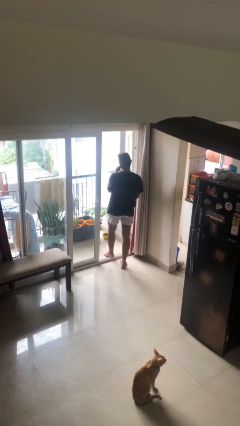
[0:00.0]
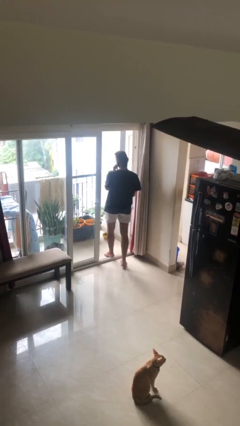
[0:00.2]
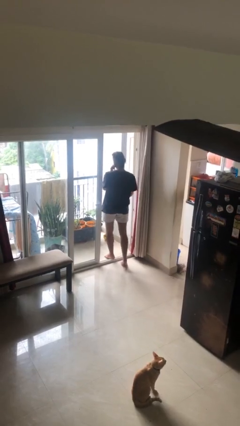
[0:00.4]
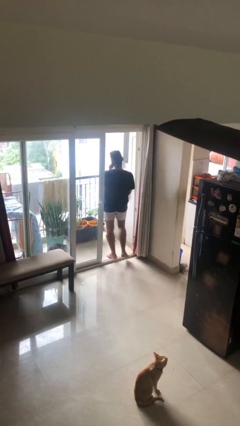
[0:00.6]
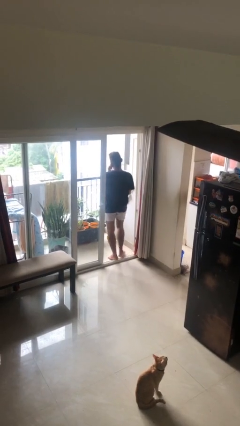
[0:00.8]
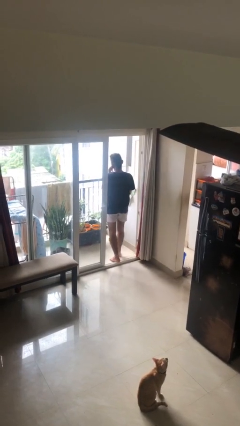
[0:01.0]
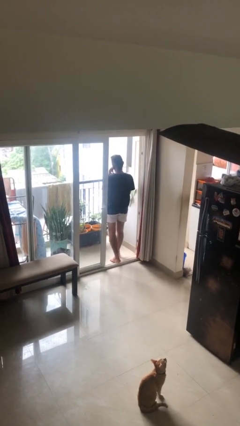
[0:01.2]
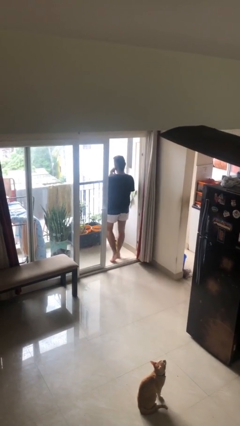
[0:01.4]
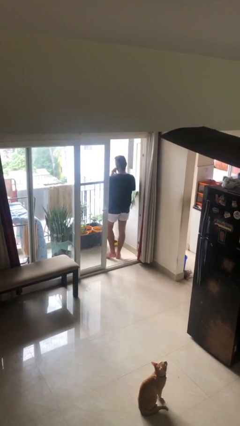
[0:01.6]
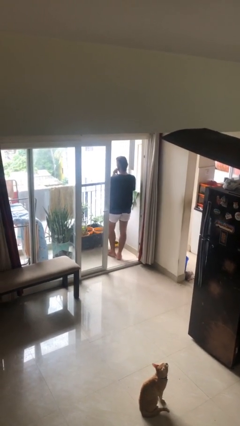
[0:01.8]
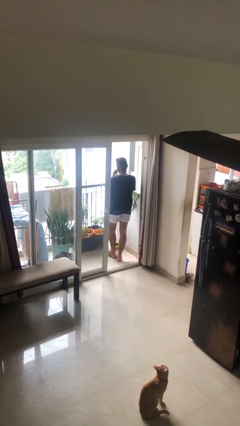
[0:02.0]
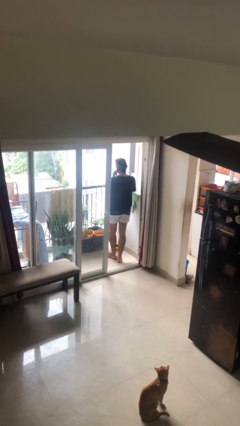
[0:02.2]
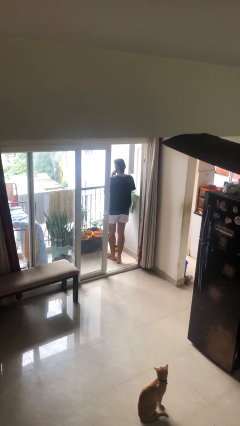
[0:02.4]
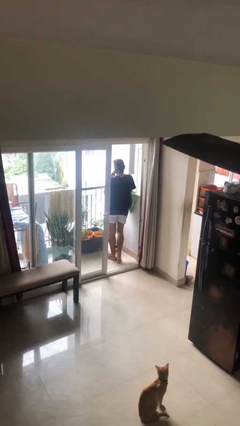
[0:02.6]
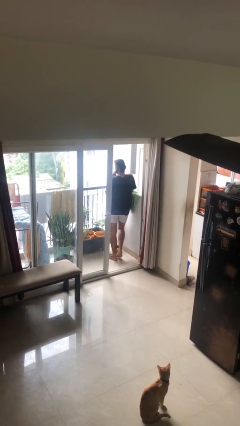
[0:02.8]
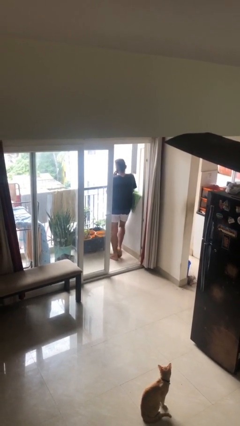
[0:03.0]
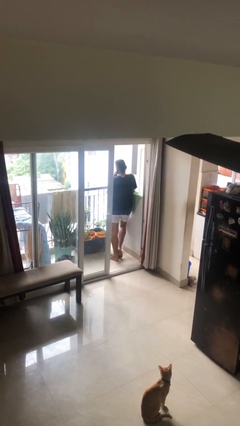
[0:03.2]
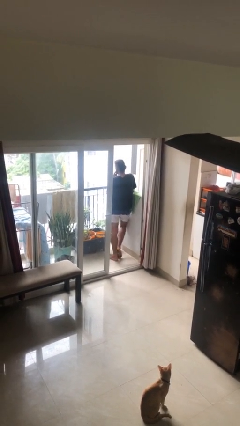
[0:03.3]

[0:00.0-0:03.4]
person exits scene through structure

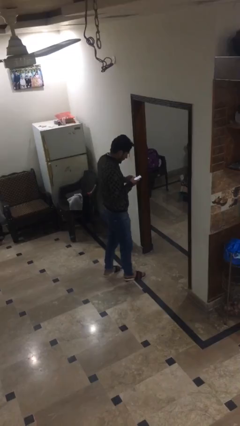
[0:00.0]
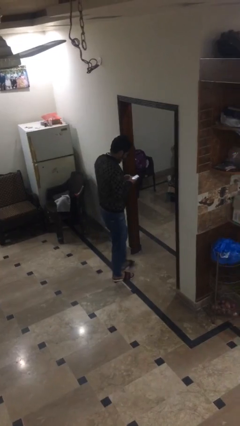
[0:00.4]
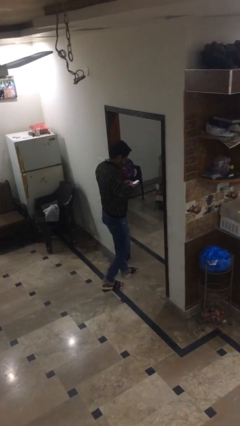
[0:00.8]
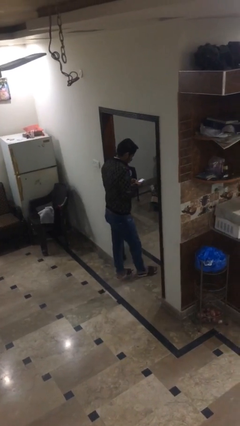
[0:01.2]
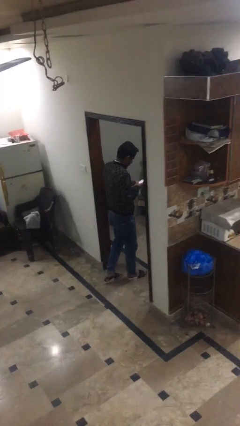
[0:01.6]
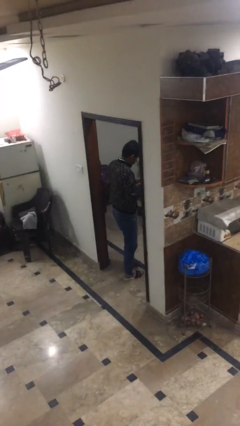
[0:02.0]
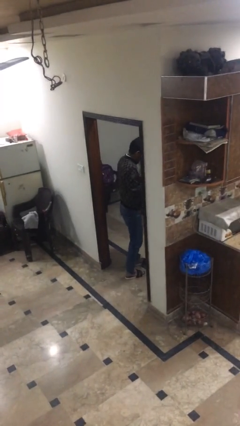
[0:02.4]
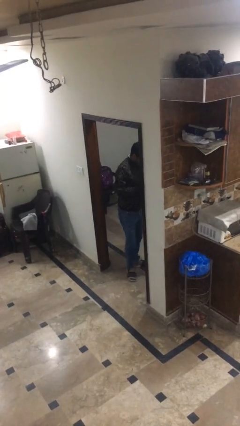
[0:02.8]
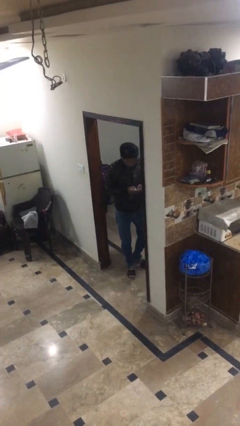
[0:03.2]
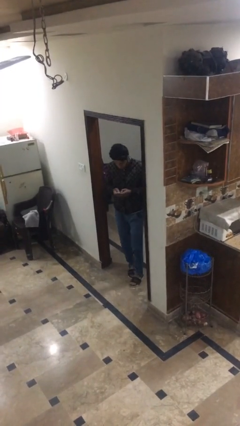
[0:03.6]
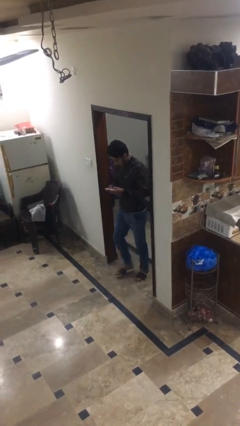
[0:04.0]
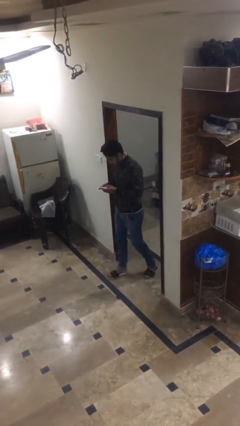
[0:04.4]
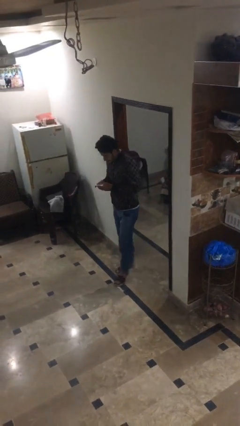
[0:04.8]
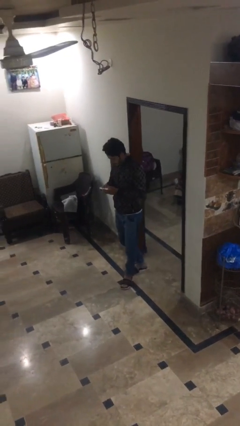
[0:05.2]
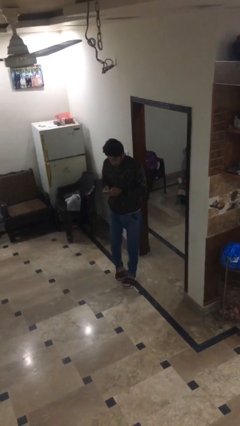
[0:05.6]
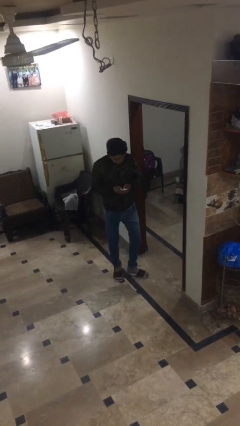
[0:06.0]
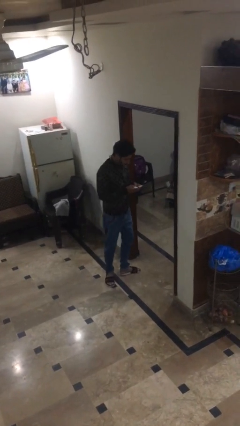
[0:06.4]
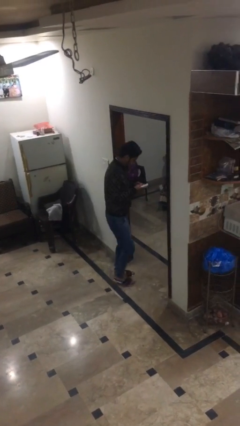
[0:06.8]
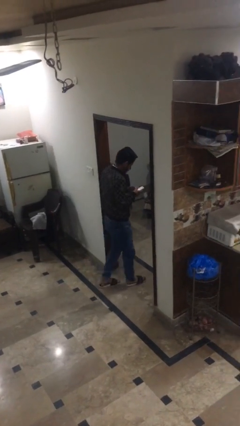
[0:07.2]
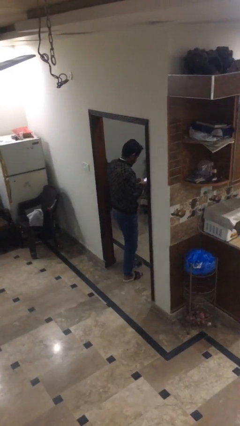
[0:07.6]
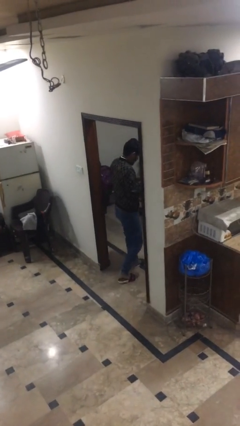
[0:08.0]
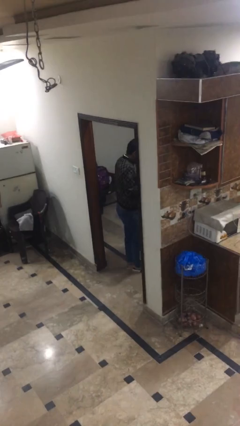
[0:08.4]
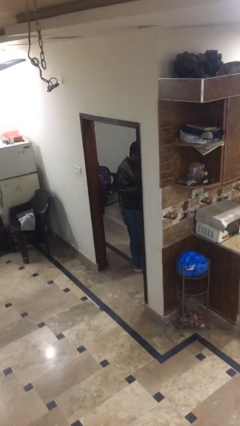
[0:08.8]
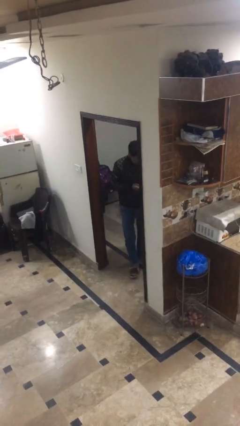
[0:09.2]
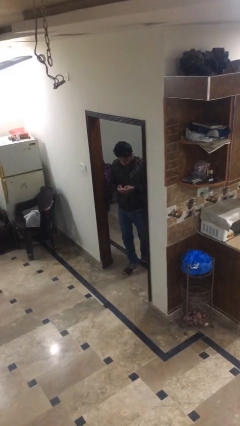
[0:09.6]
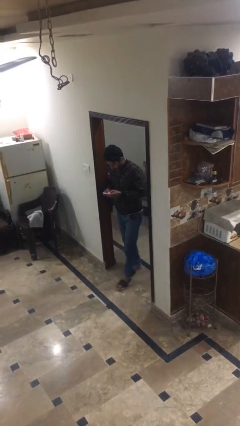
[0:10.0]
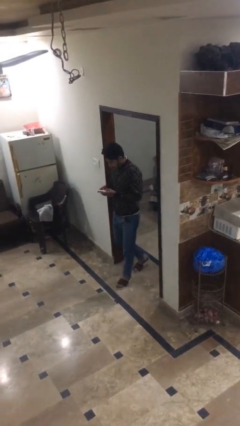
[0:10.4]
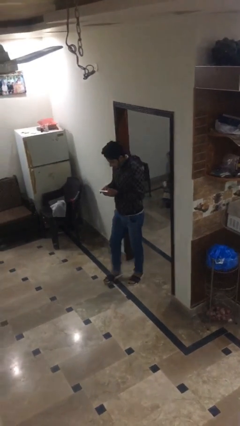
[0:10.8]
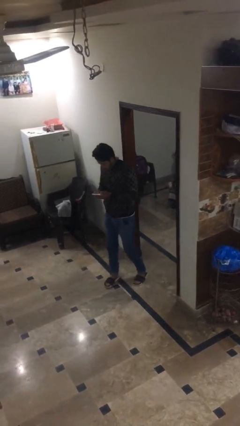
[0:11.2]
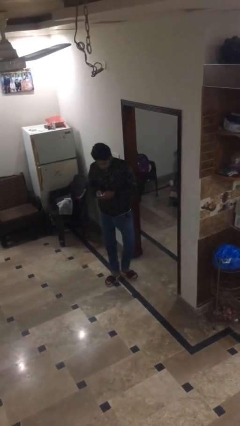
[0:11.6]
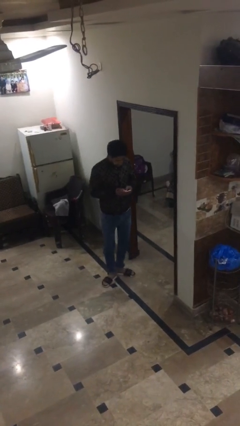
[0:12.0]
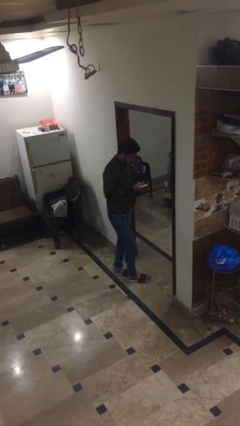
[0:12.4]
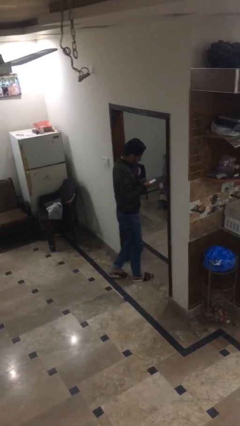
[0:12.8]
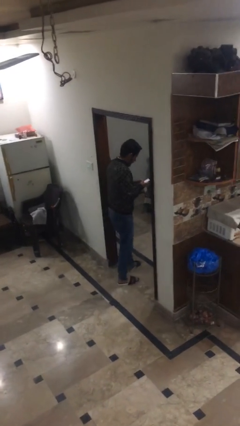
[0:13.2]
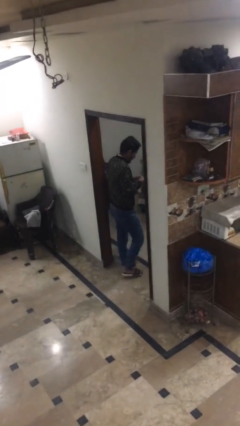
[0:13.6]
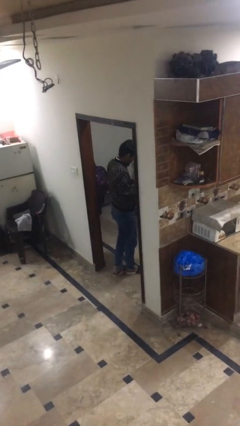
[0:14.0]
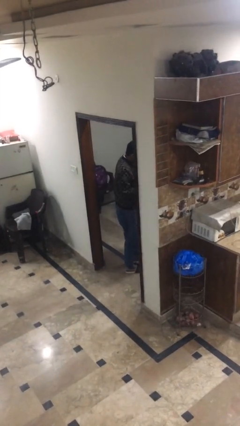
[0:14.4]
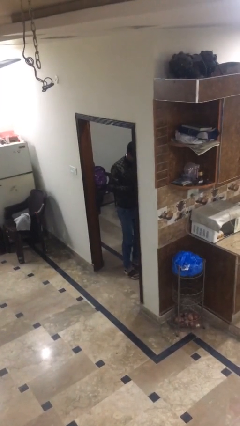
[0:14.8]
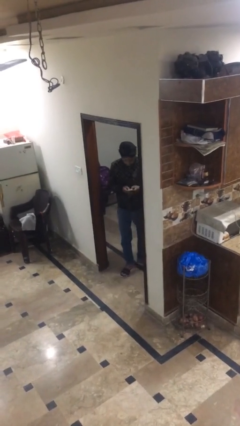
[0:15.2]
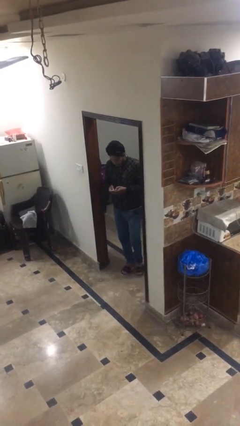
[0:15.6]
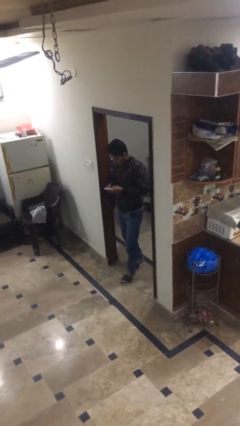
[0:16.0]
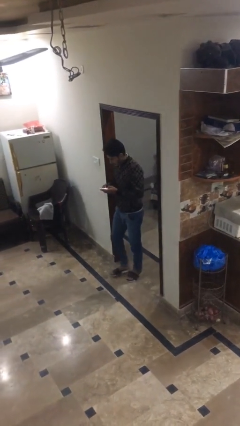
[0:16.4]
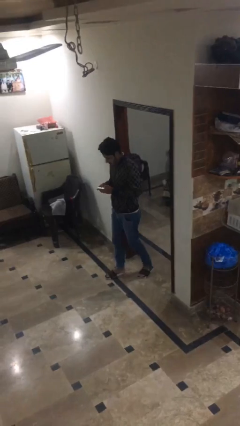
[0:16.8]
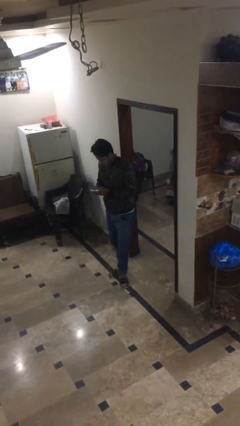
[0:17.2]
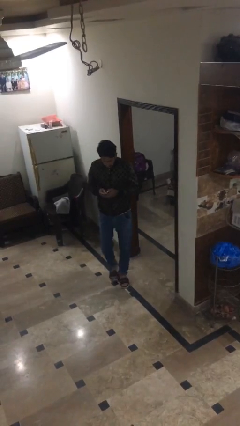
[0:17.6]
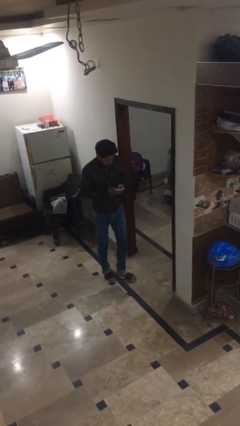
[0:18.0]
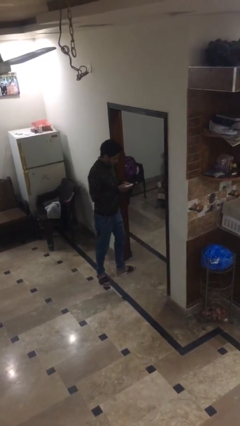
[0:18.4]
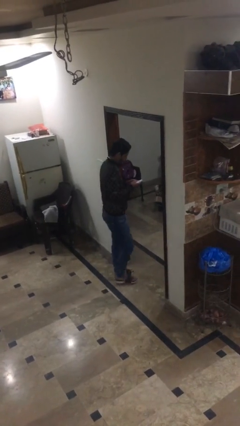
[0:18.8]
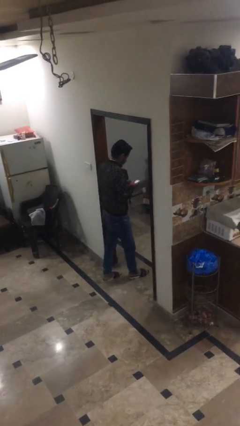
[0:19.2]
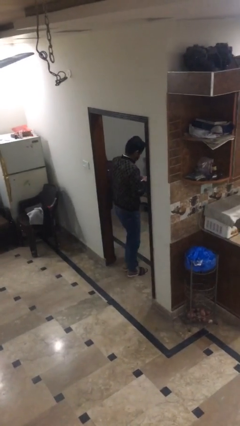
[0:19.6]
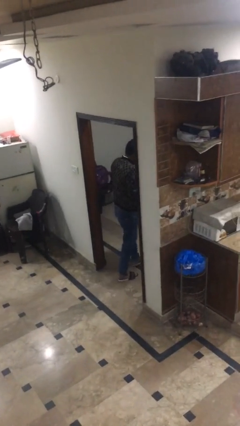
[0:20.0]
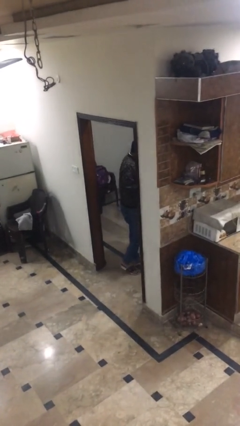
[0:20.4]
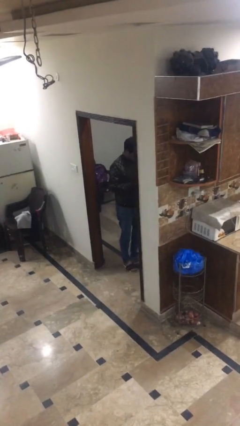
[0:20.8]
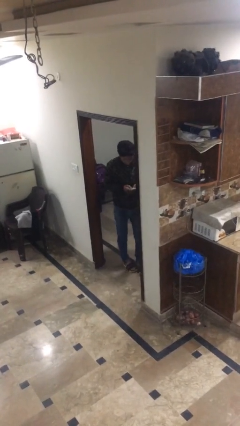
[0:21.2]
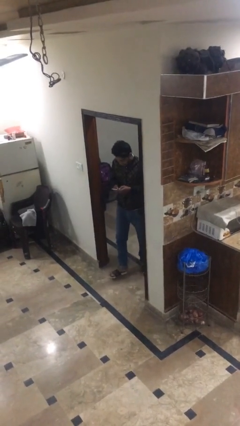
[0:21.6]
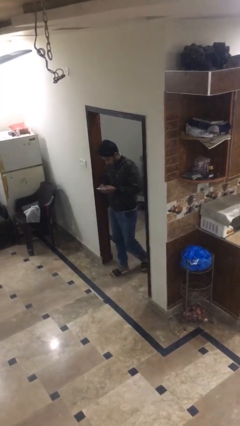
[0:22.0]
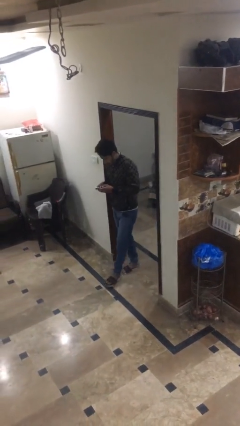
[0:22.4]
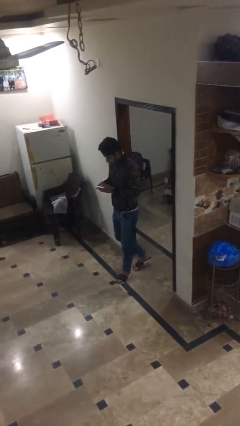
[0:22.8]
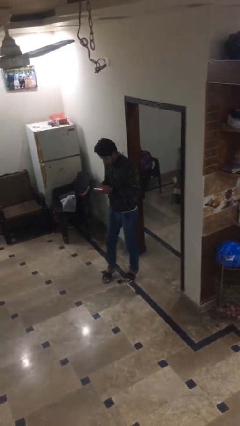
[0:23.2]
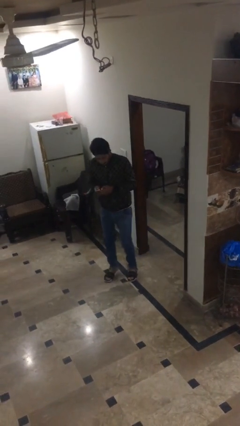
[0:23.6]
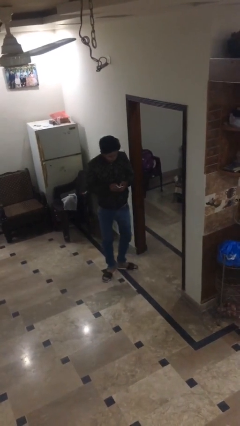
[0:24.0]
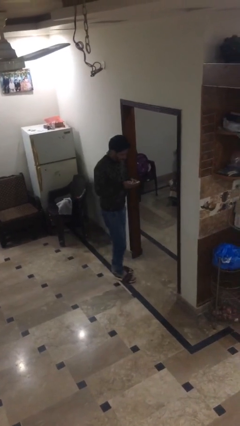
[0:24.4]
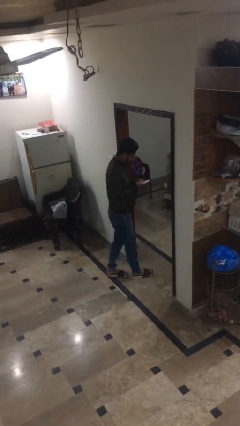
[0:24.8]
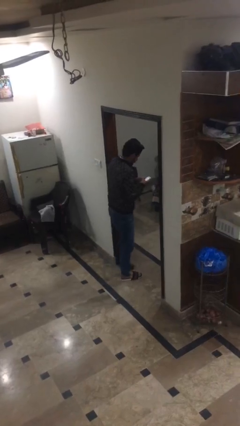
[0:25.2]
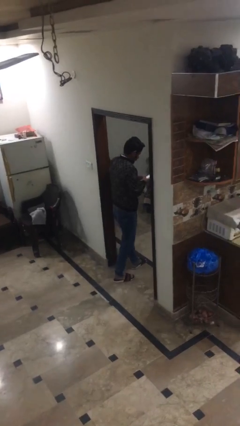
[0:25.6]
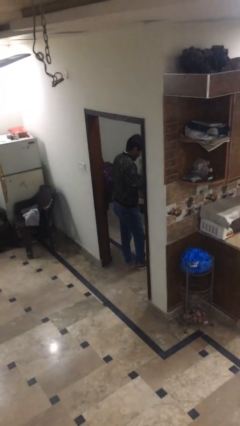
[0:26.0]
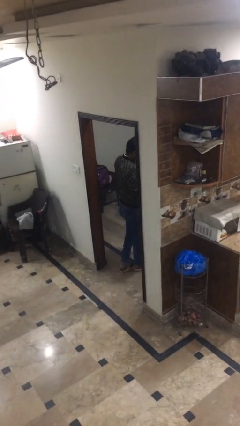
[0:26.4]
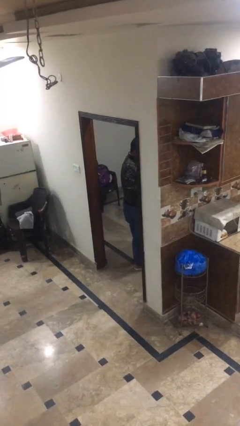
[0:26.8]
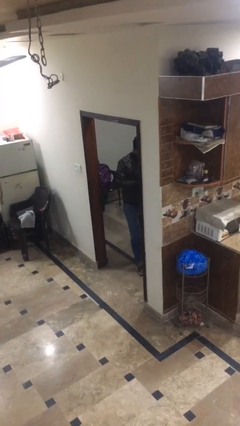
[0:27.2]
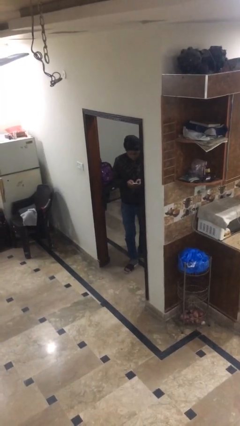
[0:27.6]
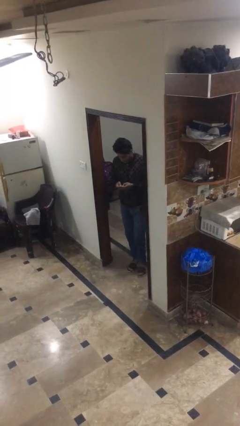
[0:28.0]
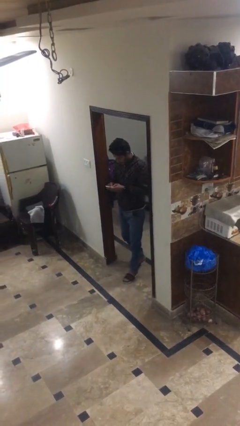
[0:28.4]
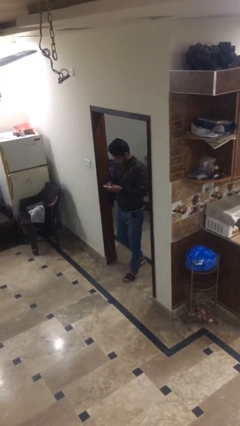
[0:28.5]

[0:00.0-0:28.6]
person texts on phone

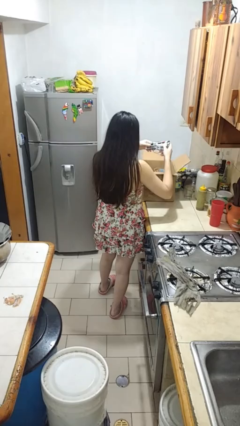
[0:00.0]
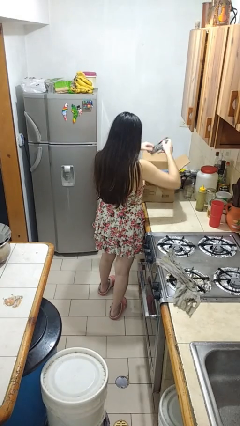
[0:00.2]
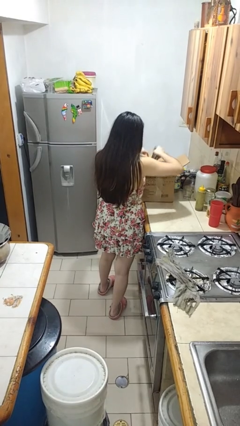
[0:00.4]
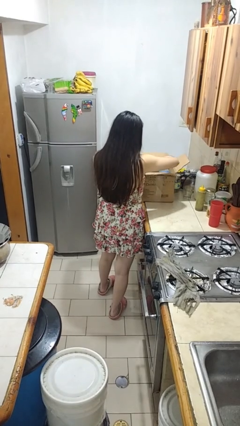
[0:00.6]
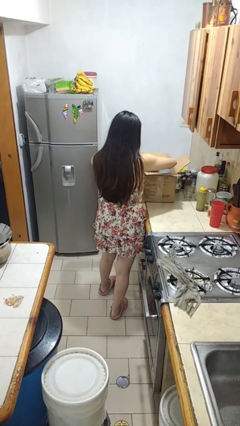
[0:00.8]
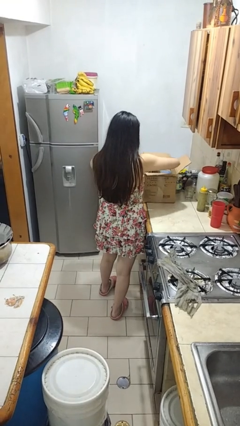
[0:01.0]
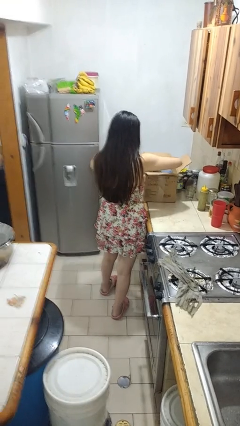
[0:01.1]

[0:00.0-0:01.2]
person puts object into box
